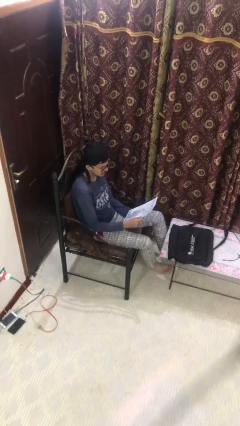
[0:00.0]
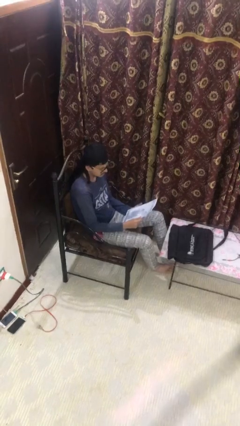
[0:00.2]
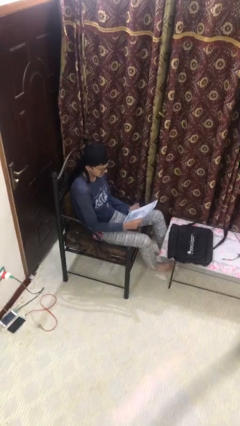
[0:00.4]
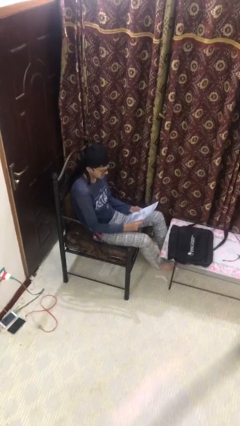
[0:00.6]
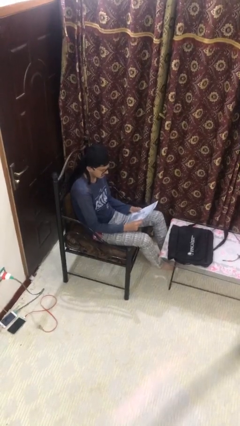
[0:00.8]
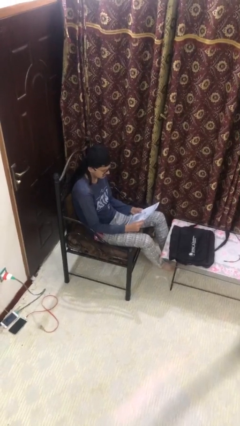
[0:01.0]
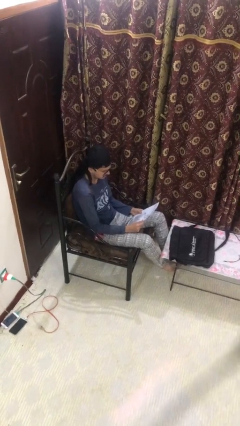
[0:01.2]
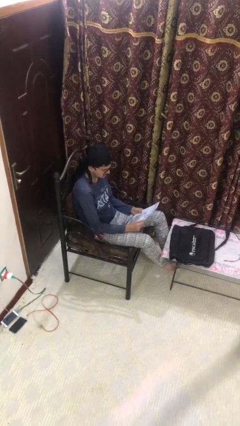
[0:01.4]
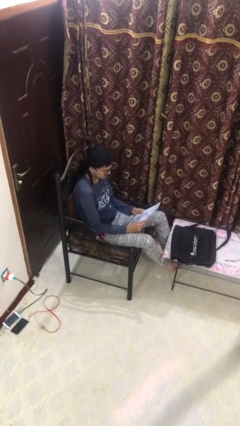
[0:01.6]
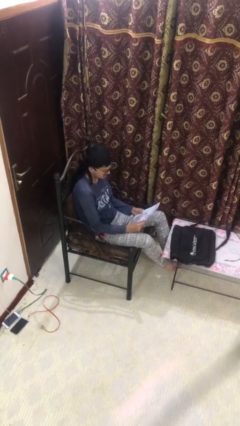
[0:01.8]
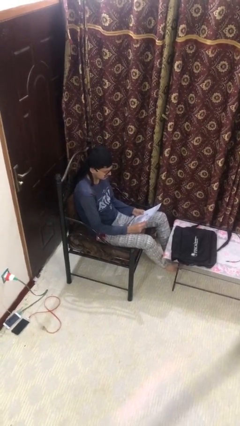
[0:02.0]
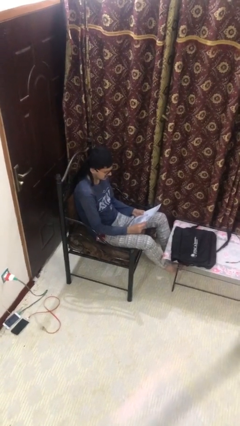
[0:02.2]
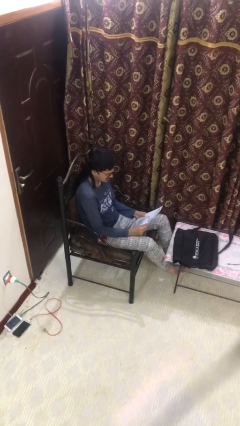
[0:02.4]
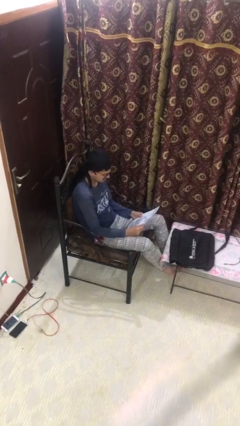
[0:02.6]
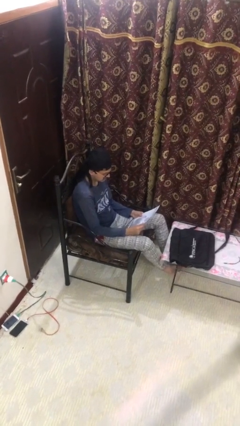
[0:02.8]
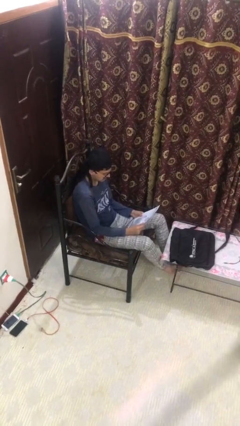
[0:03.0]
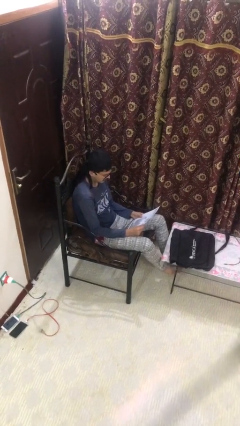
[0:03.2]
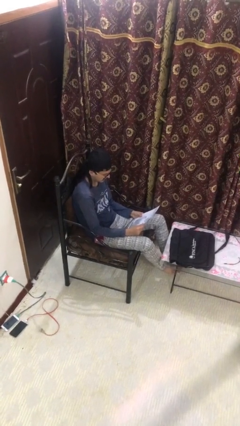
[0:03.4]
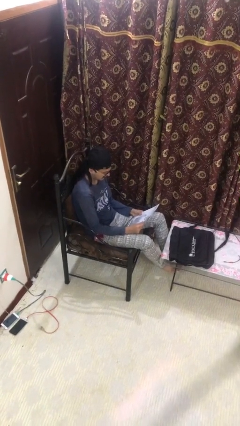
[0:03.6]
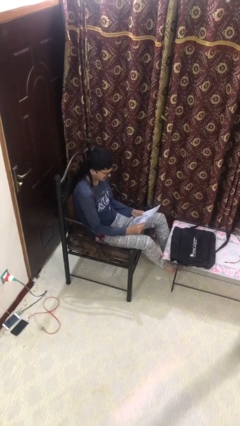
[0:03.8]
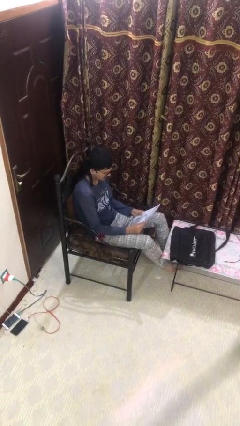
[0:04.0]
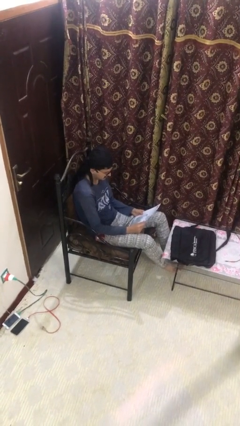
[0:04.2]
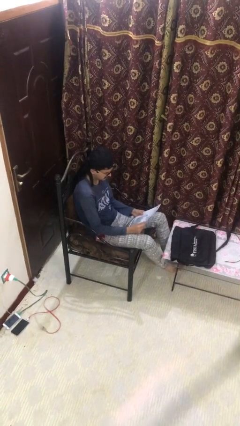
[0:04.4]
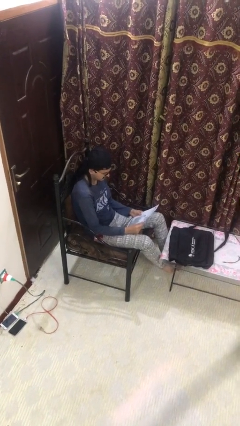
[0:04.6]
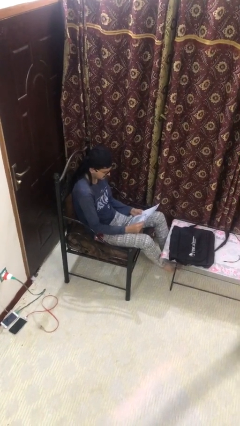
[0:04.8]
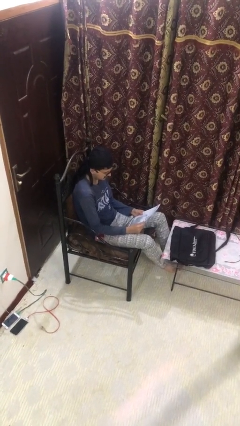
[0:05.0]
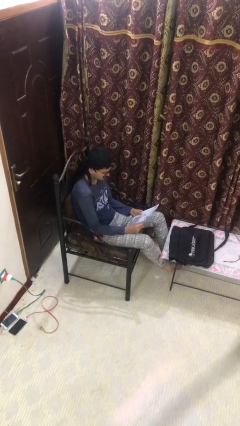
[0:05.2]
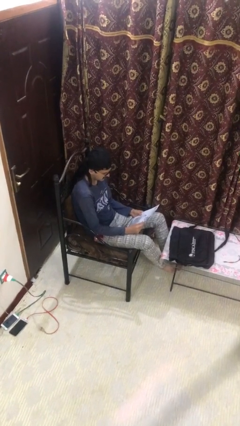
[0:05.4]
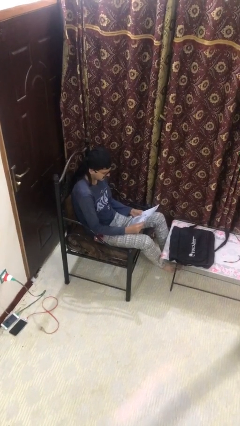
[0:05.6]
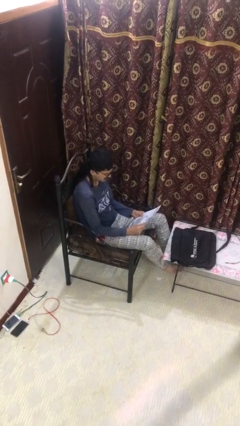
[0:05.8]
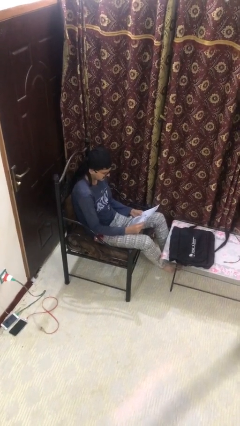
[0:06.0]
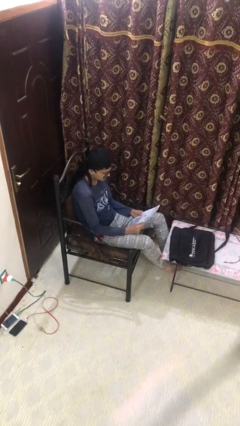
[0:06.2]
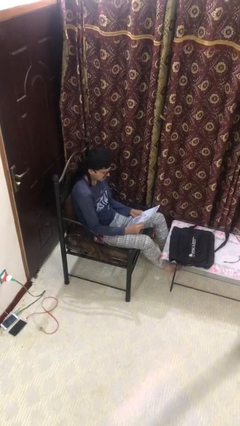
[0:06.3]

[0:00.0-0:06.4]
person reads document

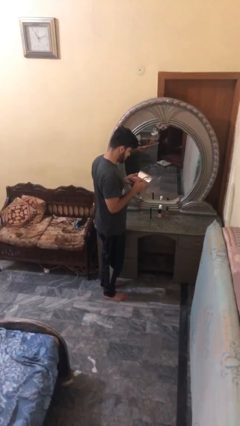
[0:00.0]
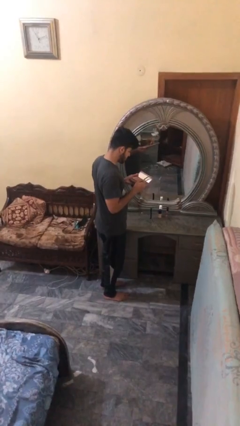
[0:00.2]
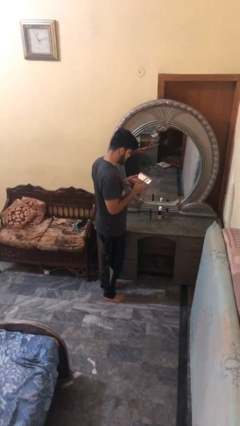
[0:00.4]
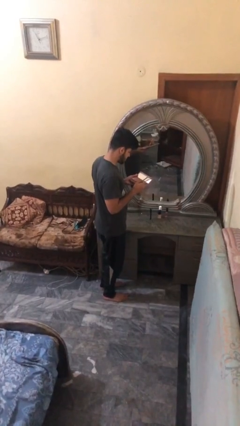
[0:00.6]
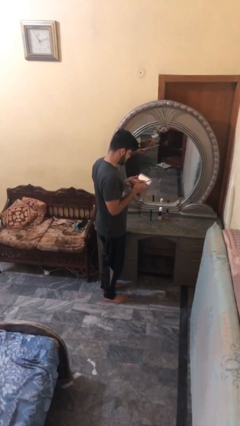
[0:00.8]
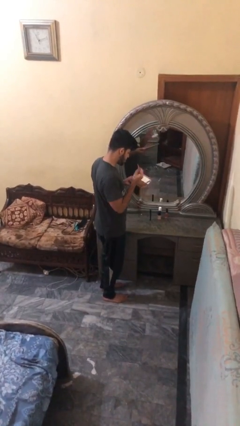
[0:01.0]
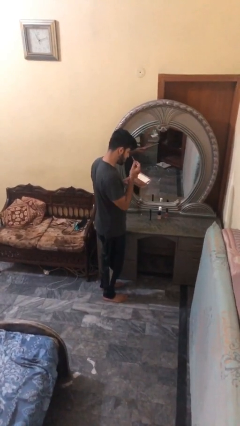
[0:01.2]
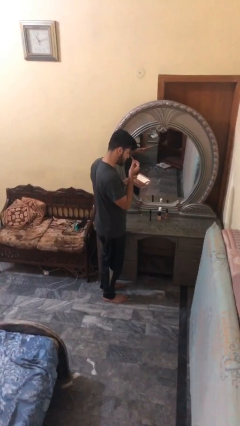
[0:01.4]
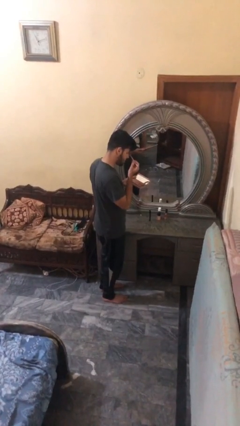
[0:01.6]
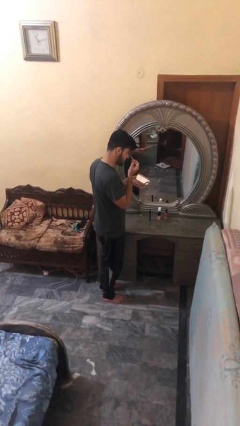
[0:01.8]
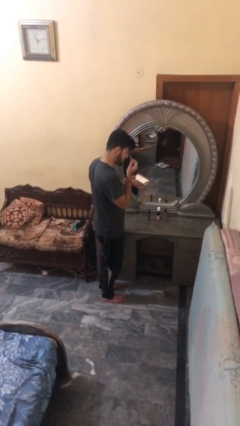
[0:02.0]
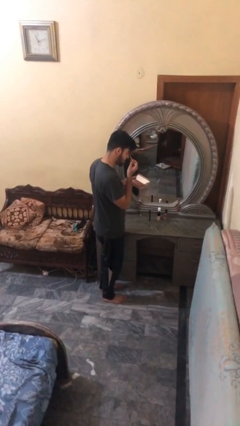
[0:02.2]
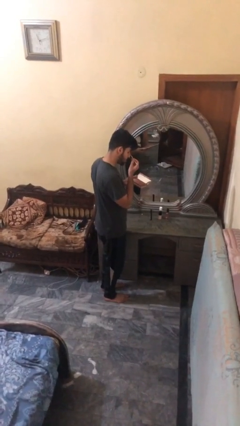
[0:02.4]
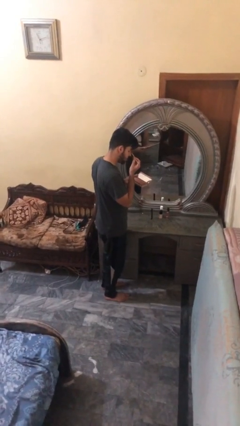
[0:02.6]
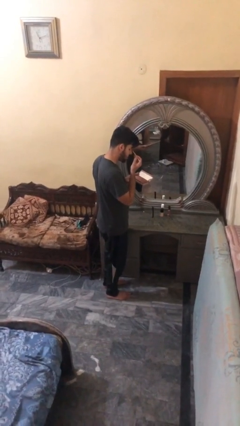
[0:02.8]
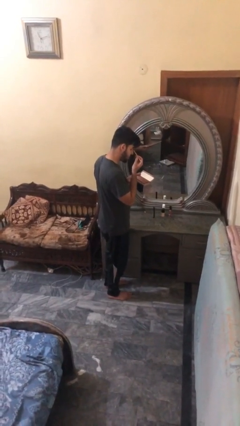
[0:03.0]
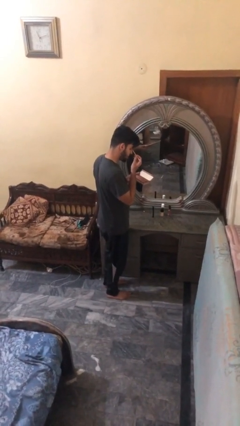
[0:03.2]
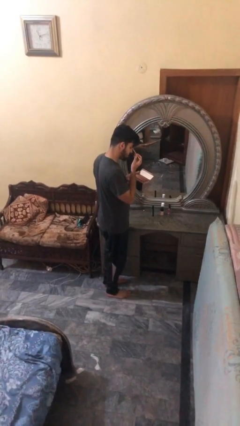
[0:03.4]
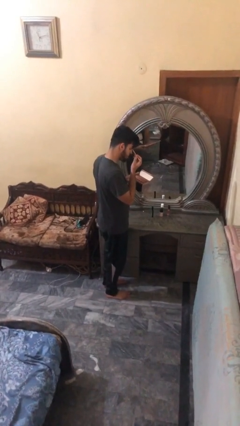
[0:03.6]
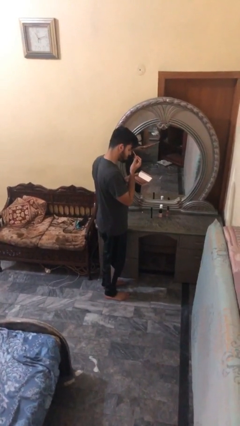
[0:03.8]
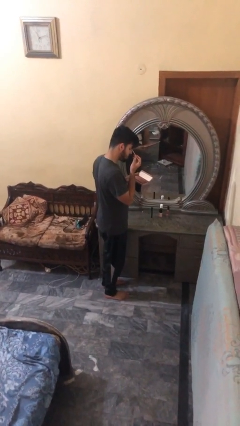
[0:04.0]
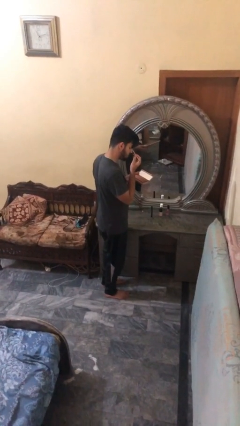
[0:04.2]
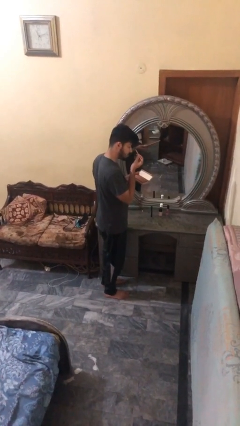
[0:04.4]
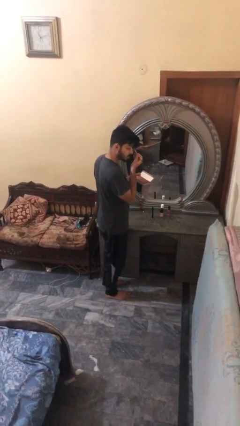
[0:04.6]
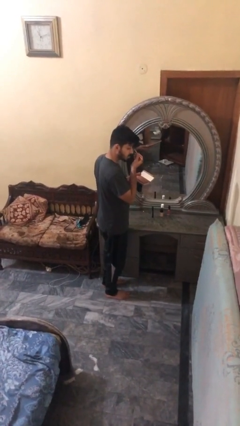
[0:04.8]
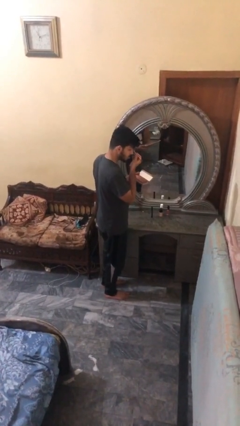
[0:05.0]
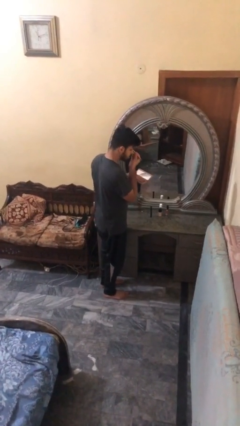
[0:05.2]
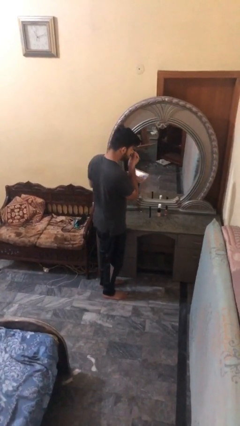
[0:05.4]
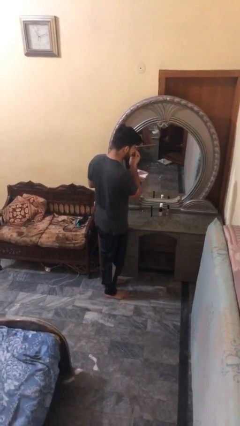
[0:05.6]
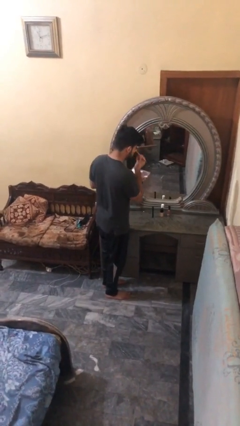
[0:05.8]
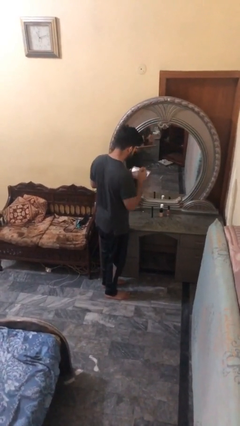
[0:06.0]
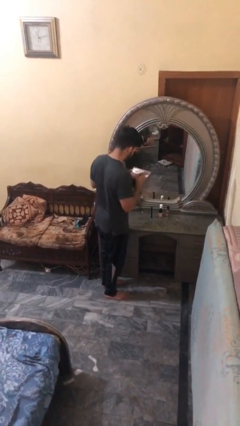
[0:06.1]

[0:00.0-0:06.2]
person applies eye makeup

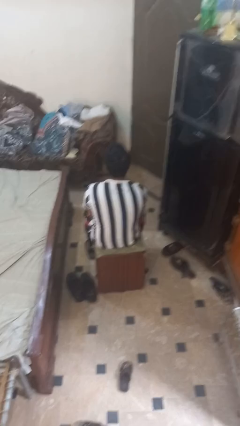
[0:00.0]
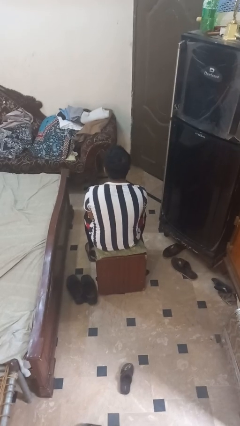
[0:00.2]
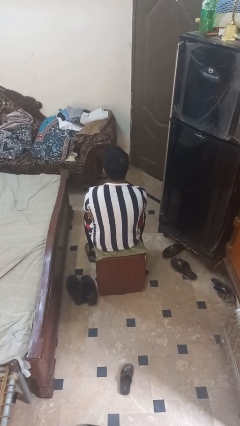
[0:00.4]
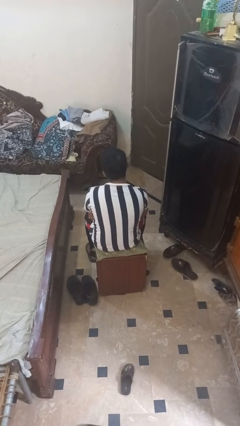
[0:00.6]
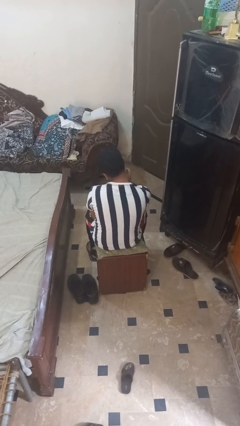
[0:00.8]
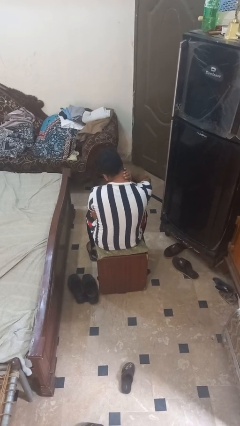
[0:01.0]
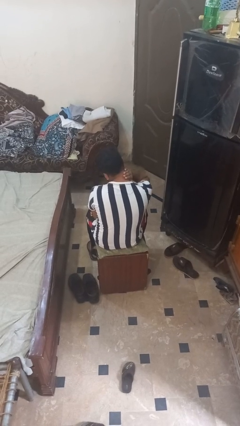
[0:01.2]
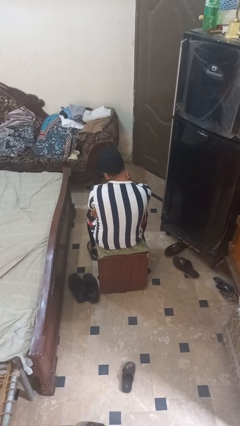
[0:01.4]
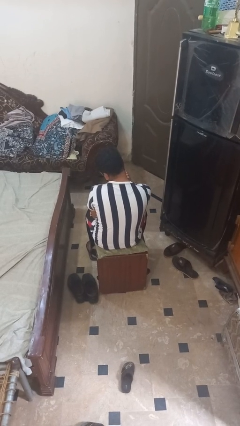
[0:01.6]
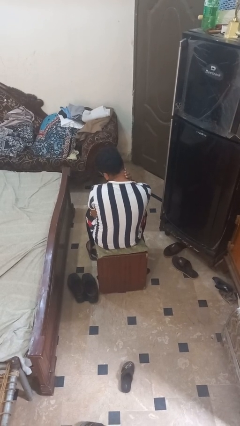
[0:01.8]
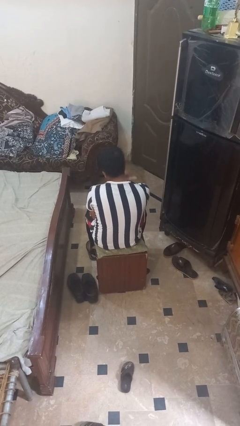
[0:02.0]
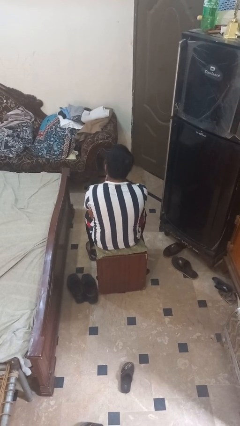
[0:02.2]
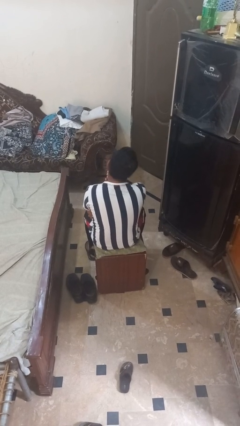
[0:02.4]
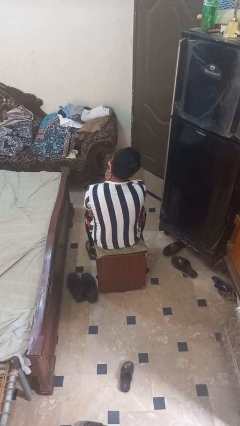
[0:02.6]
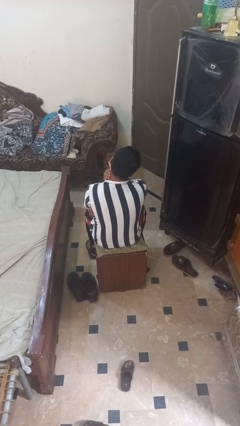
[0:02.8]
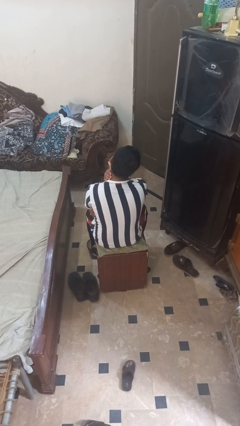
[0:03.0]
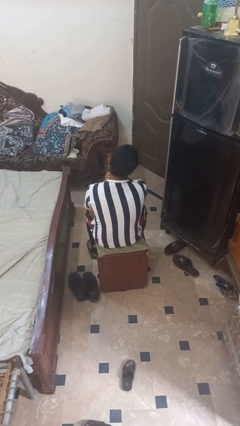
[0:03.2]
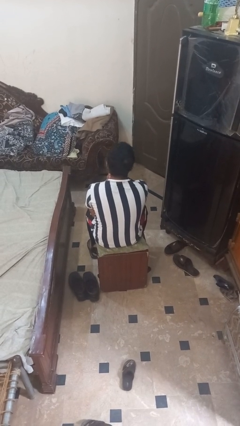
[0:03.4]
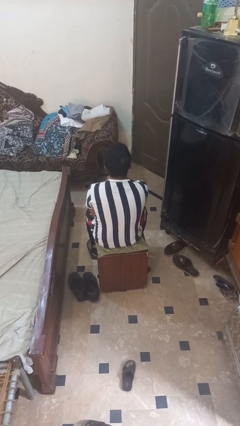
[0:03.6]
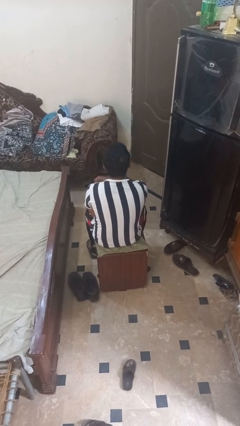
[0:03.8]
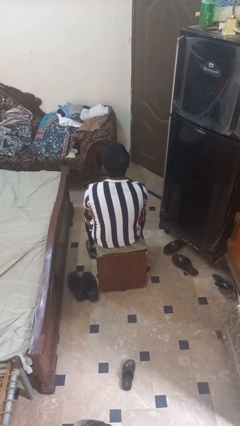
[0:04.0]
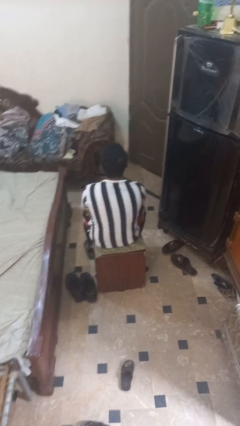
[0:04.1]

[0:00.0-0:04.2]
person rubs neck

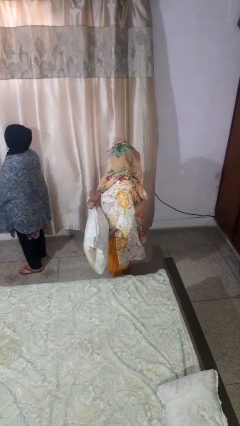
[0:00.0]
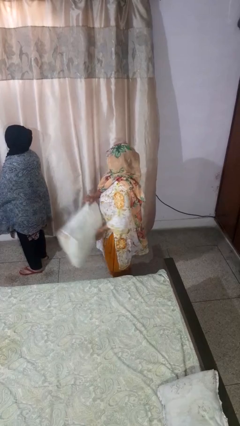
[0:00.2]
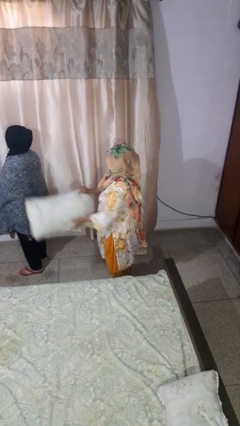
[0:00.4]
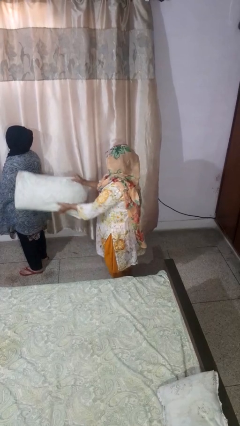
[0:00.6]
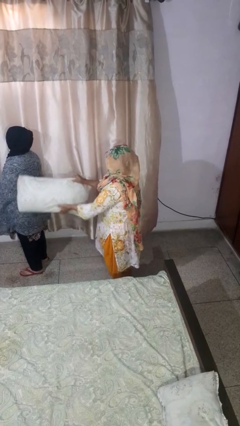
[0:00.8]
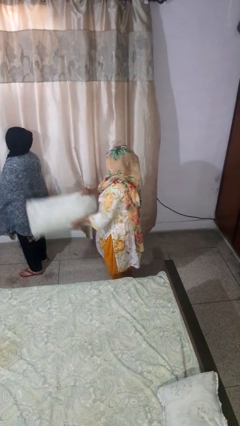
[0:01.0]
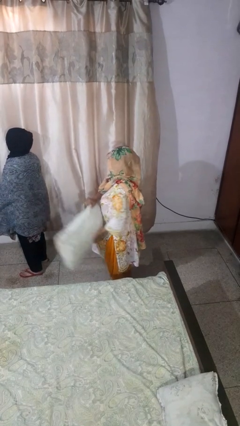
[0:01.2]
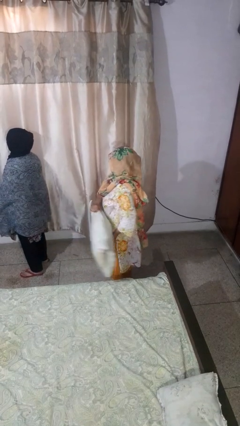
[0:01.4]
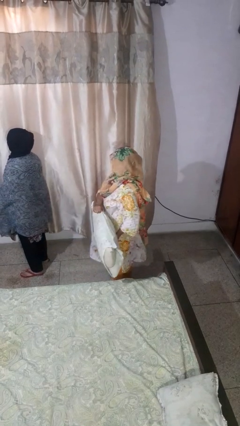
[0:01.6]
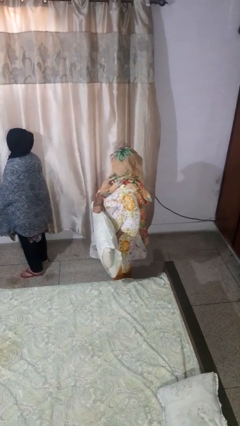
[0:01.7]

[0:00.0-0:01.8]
person hits person with pillow
